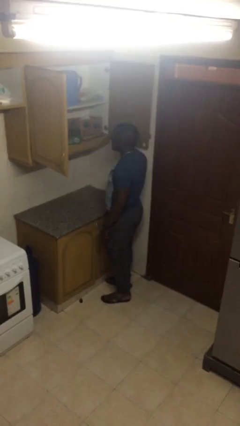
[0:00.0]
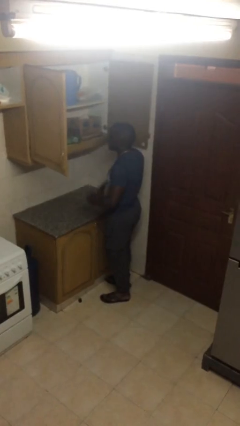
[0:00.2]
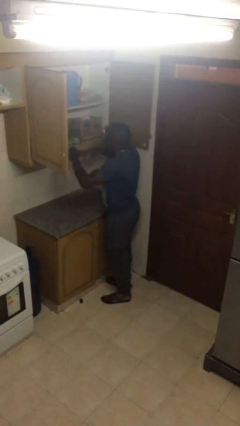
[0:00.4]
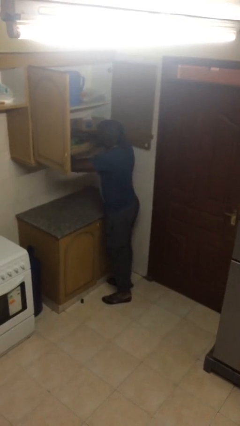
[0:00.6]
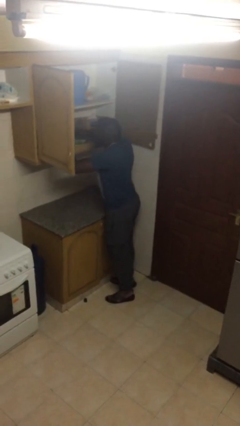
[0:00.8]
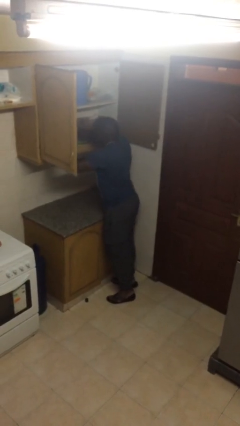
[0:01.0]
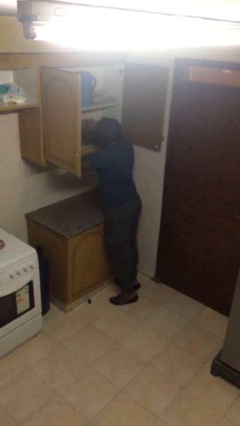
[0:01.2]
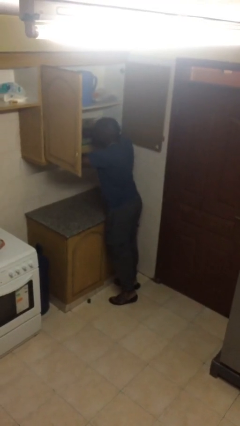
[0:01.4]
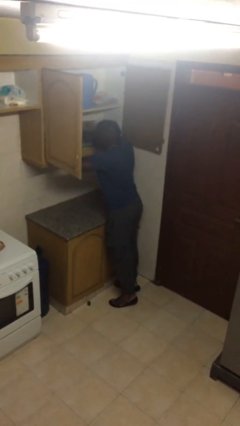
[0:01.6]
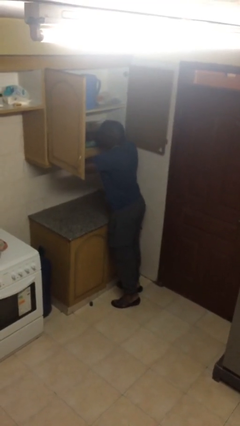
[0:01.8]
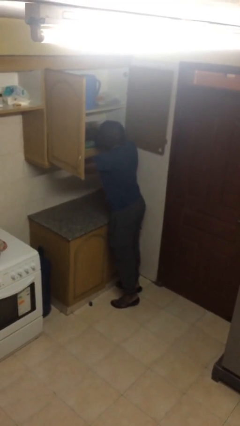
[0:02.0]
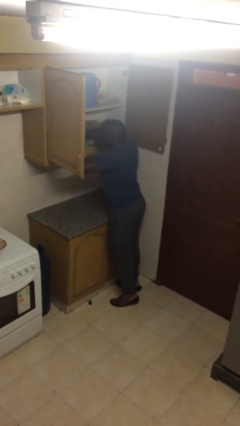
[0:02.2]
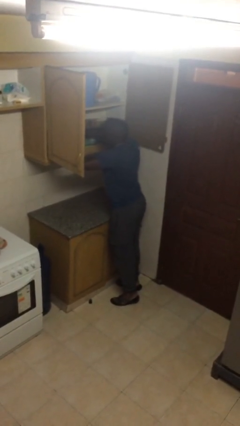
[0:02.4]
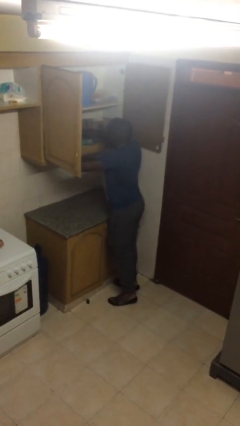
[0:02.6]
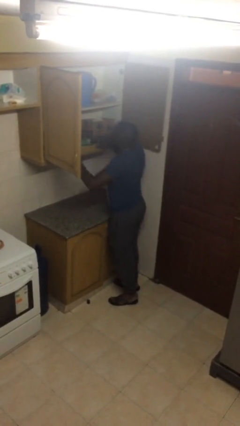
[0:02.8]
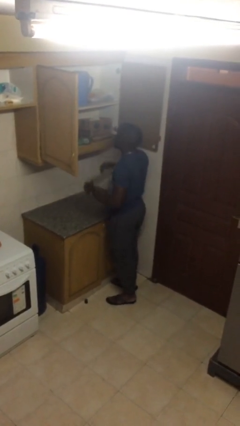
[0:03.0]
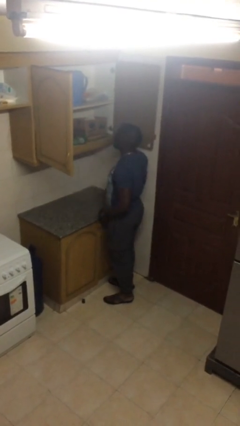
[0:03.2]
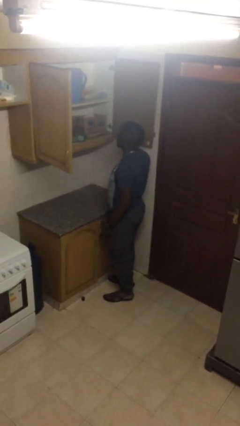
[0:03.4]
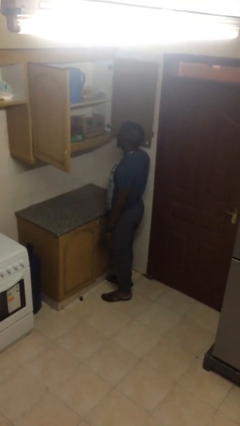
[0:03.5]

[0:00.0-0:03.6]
person searches in cabinet

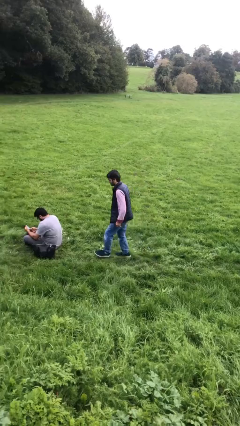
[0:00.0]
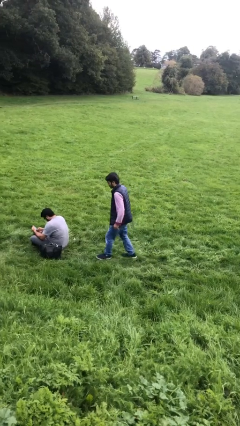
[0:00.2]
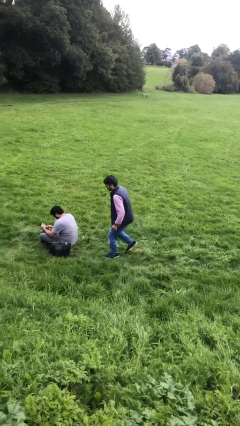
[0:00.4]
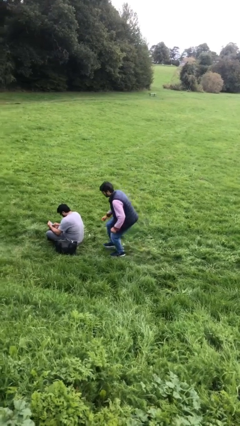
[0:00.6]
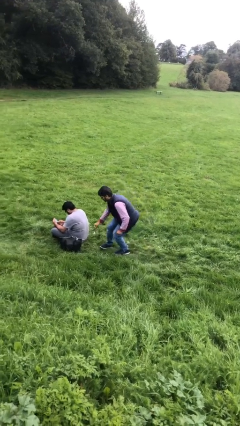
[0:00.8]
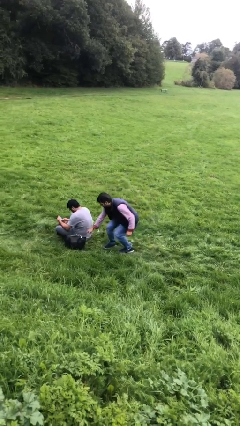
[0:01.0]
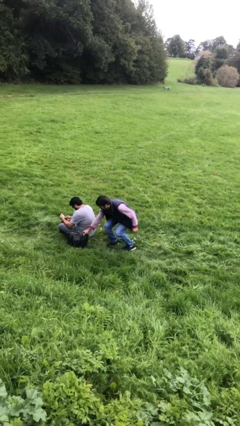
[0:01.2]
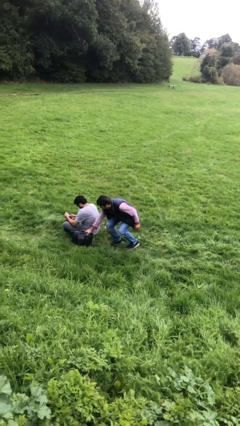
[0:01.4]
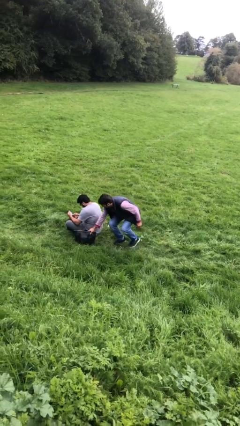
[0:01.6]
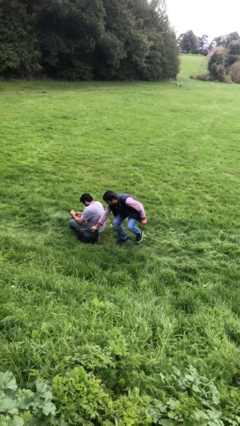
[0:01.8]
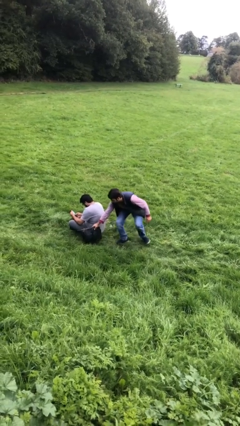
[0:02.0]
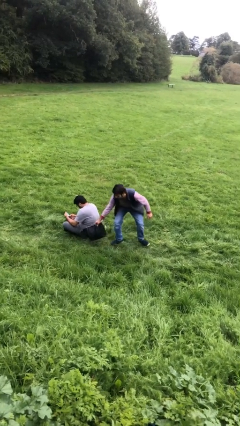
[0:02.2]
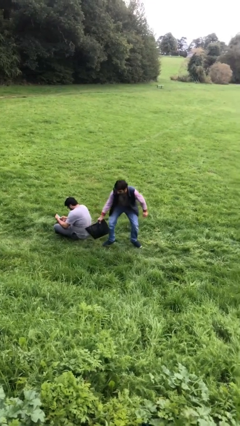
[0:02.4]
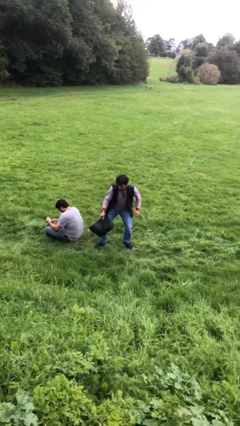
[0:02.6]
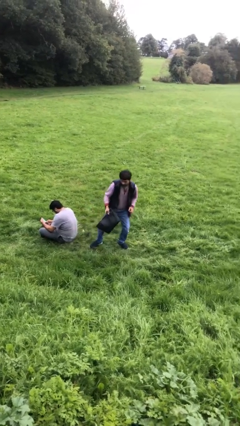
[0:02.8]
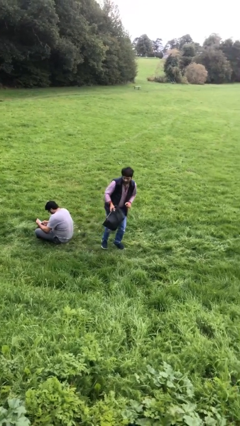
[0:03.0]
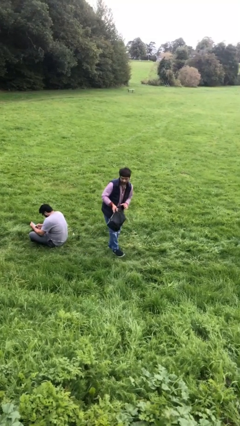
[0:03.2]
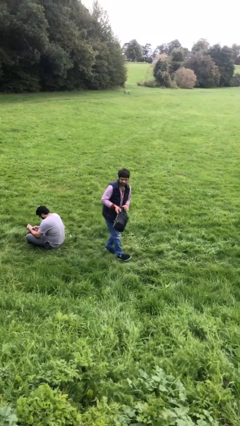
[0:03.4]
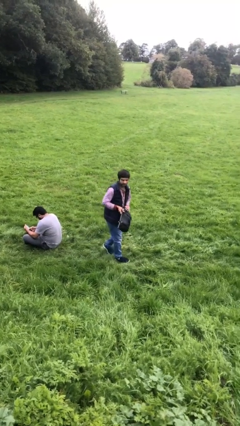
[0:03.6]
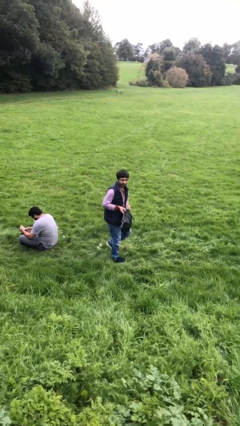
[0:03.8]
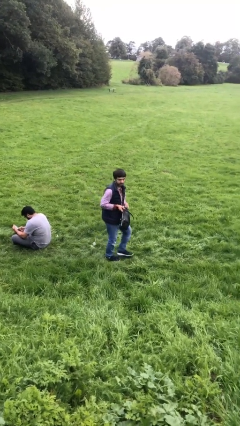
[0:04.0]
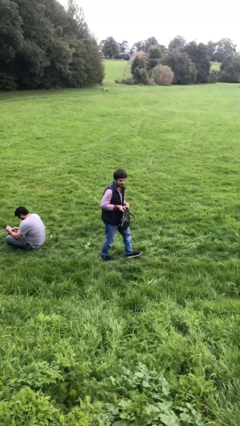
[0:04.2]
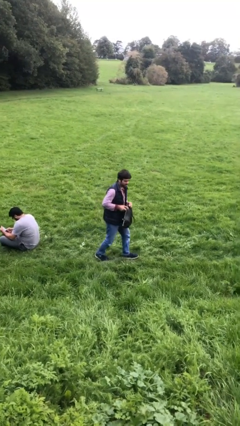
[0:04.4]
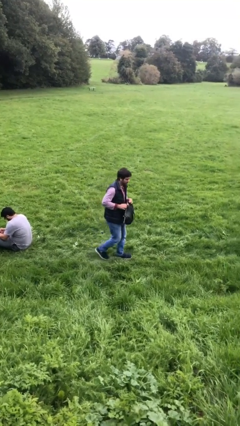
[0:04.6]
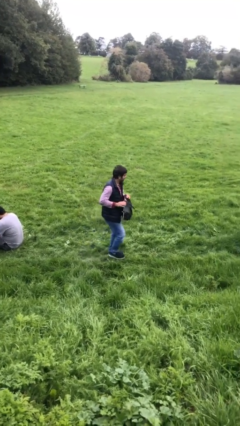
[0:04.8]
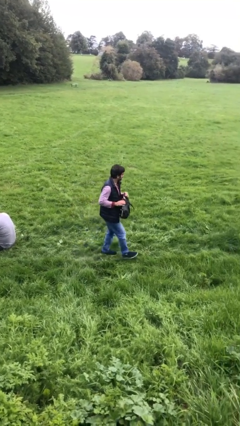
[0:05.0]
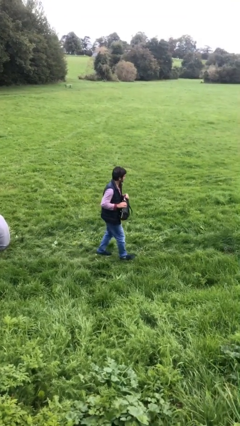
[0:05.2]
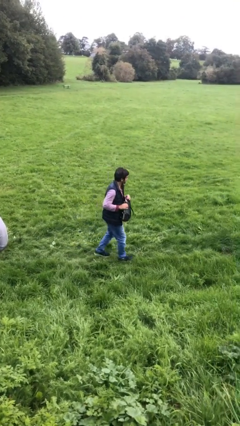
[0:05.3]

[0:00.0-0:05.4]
person steals object from person

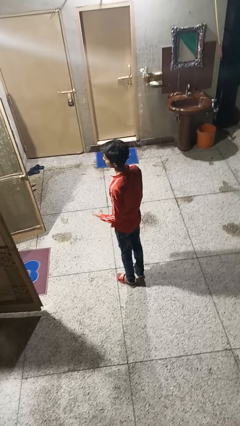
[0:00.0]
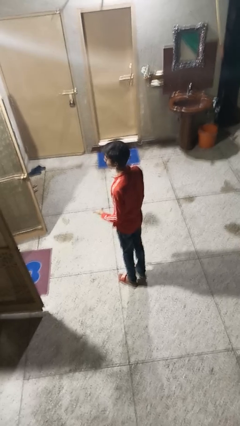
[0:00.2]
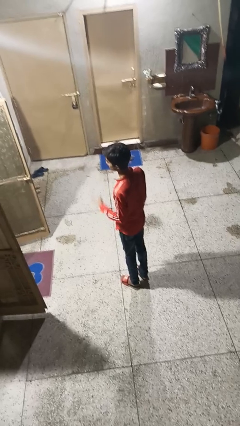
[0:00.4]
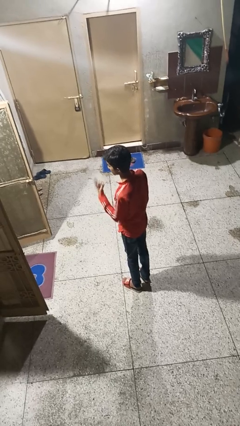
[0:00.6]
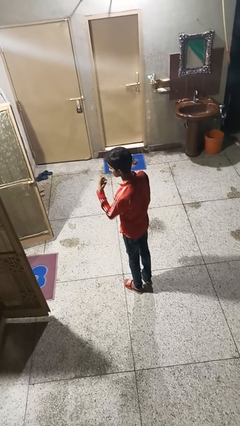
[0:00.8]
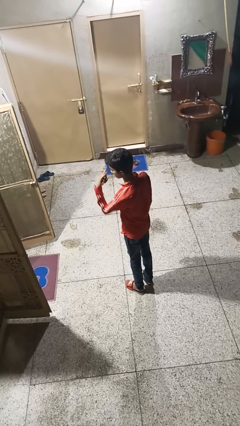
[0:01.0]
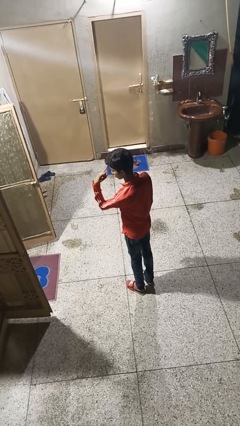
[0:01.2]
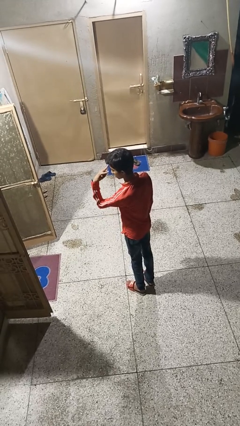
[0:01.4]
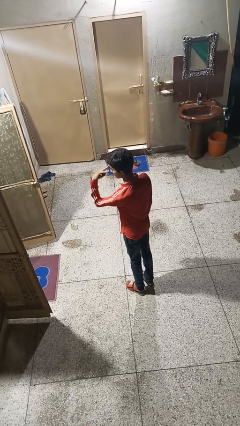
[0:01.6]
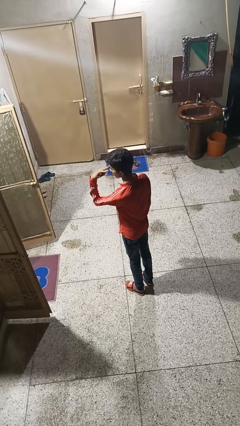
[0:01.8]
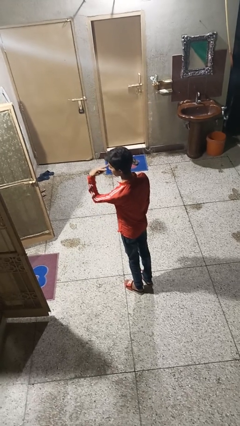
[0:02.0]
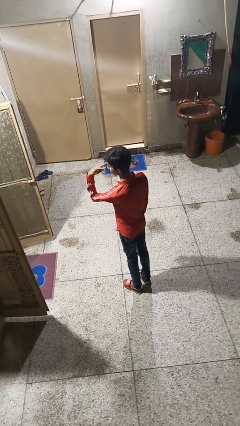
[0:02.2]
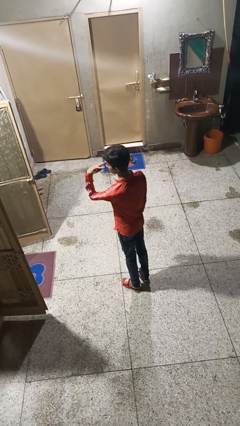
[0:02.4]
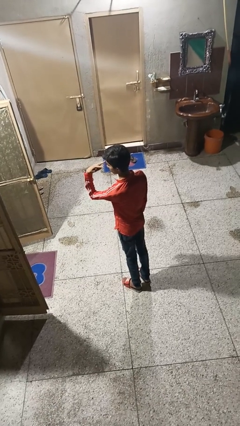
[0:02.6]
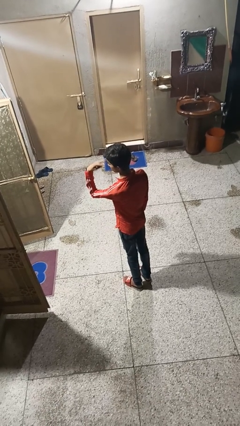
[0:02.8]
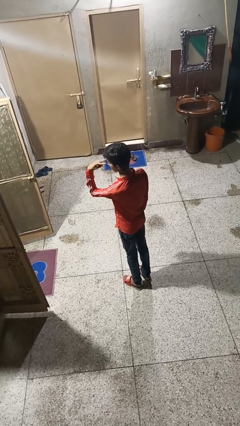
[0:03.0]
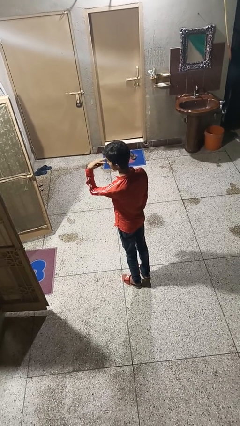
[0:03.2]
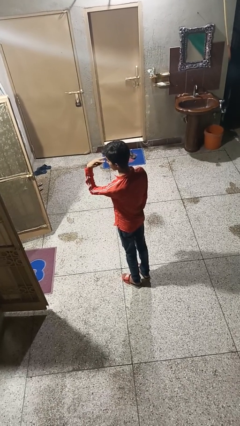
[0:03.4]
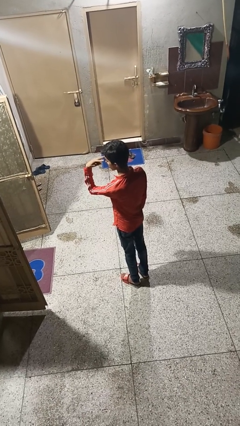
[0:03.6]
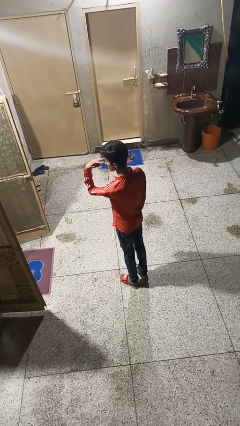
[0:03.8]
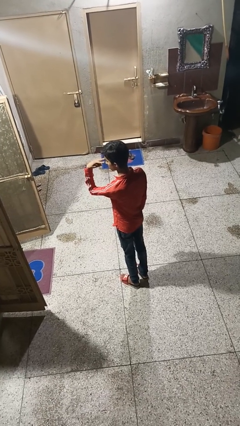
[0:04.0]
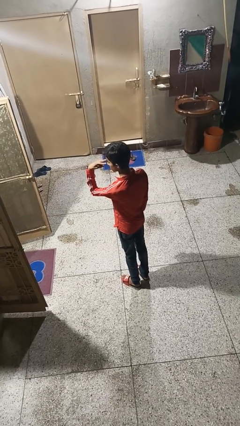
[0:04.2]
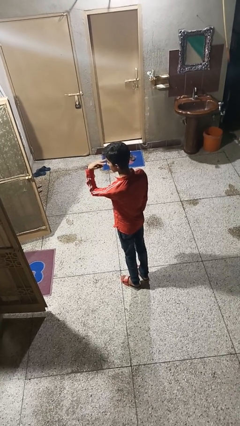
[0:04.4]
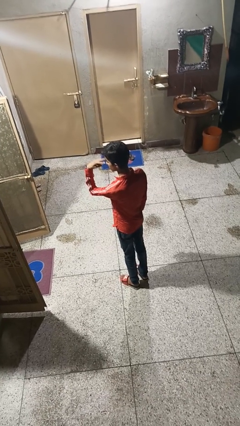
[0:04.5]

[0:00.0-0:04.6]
person gestures watch closely

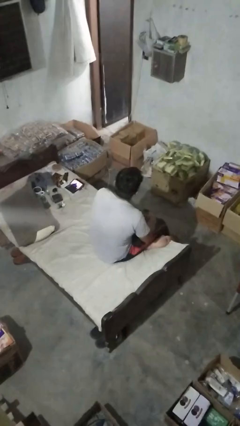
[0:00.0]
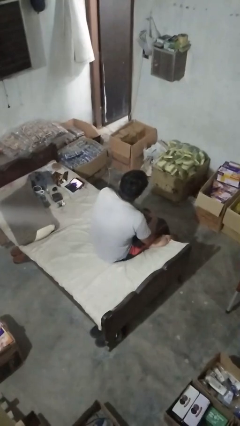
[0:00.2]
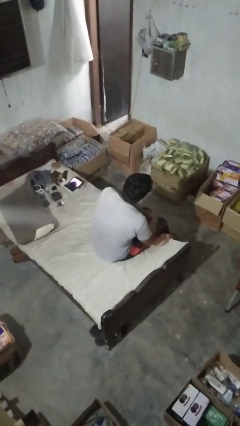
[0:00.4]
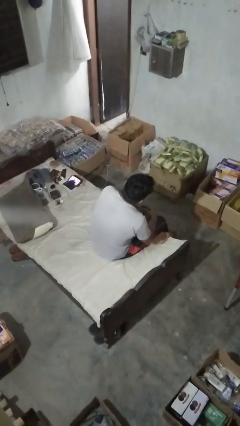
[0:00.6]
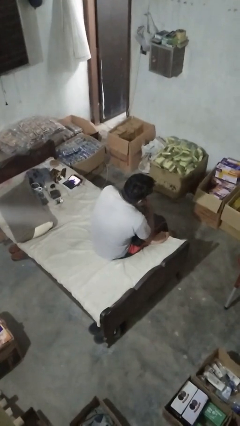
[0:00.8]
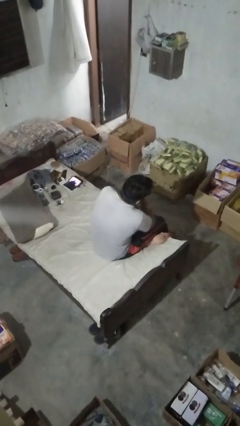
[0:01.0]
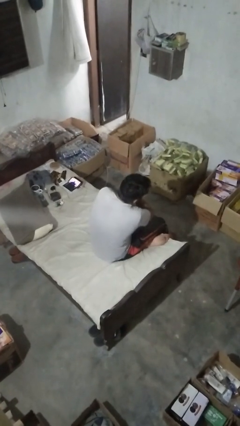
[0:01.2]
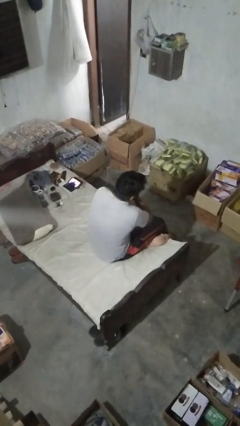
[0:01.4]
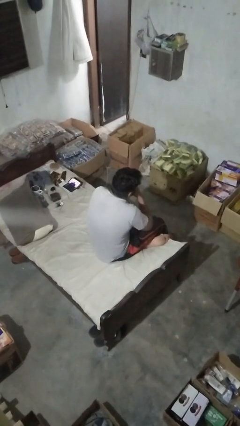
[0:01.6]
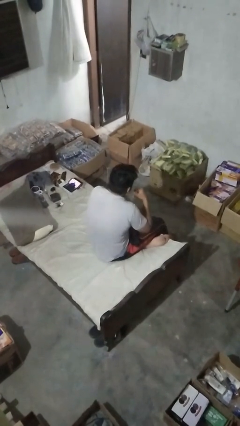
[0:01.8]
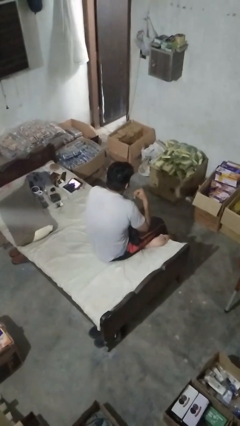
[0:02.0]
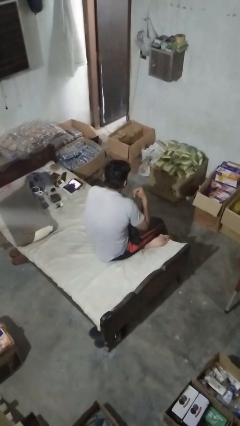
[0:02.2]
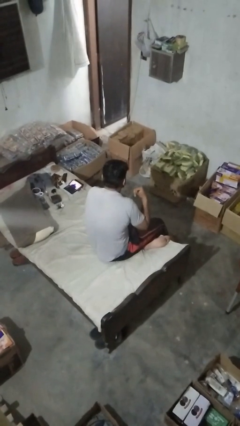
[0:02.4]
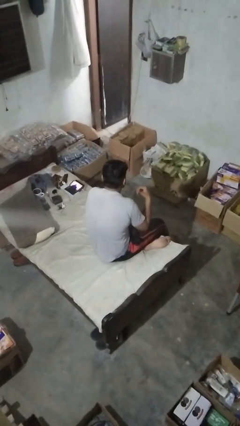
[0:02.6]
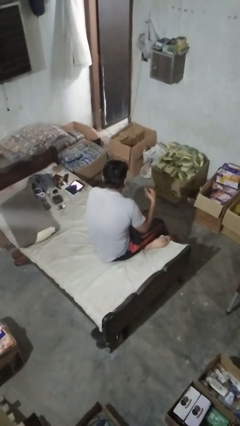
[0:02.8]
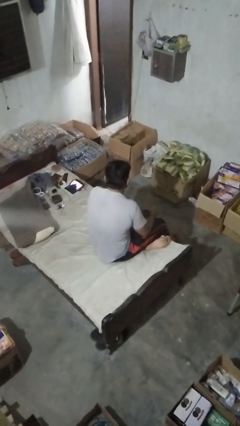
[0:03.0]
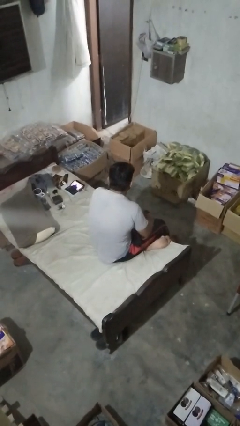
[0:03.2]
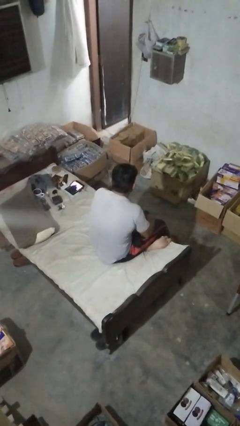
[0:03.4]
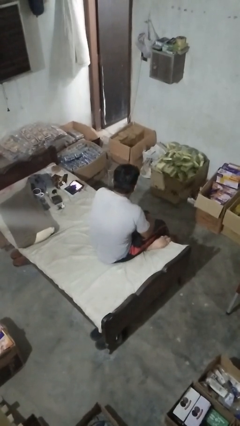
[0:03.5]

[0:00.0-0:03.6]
person gestures cut
